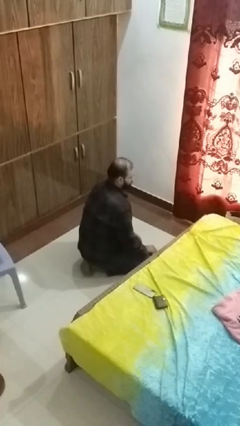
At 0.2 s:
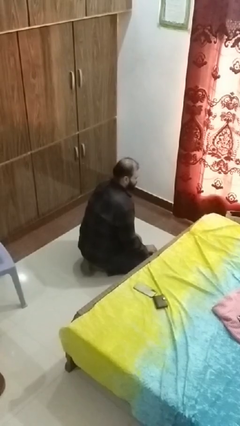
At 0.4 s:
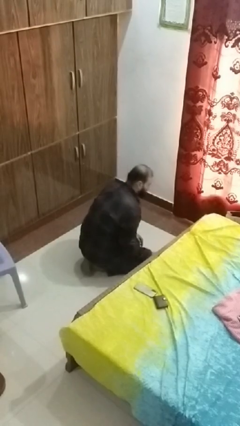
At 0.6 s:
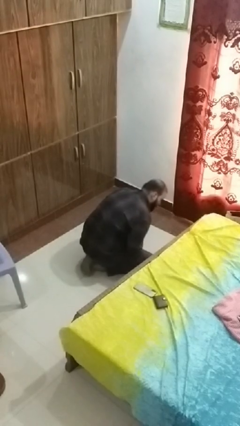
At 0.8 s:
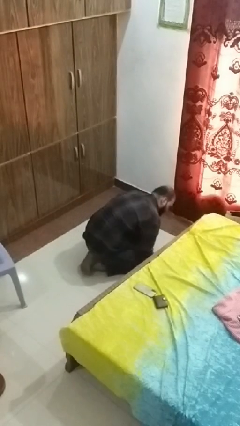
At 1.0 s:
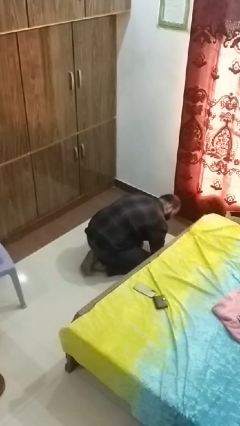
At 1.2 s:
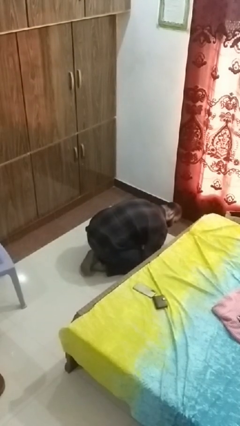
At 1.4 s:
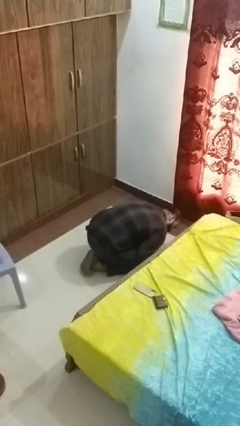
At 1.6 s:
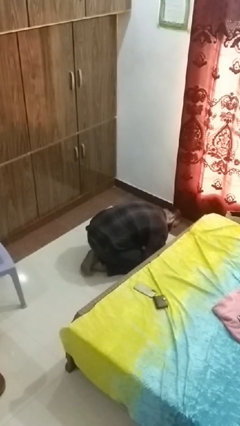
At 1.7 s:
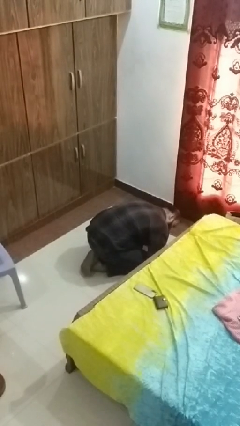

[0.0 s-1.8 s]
person searches under bed

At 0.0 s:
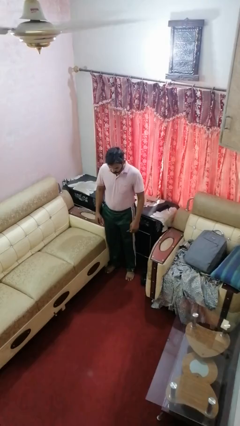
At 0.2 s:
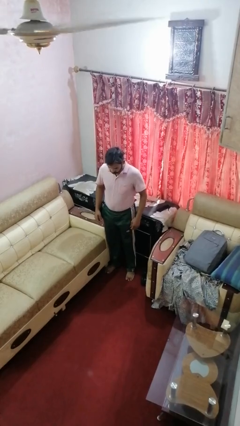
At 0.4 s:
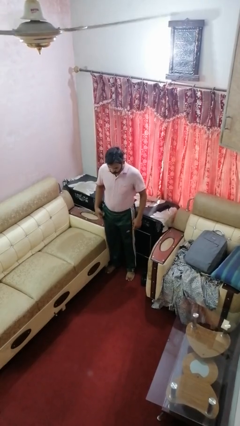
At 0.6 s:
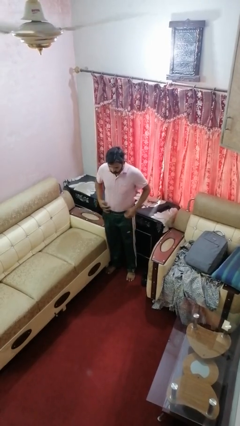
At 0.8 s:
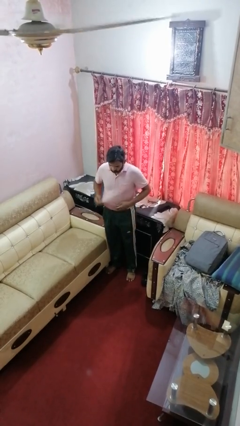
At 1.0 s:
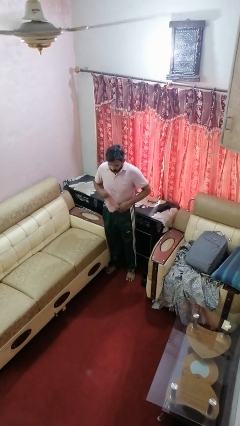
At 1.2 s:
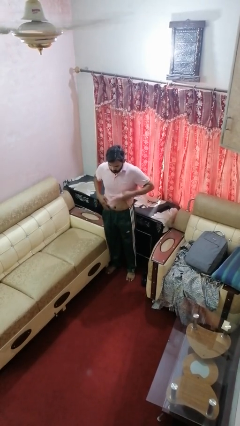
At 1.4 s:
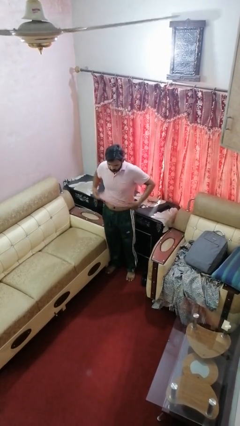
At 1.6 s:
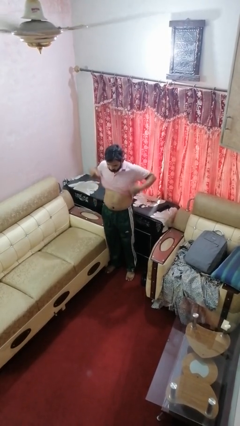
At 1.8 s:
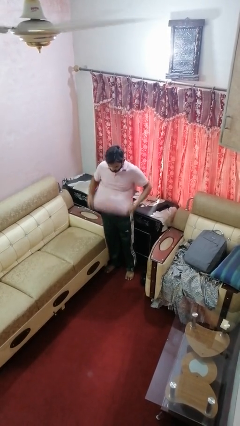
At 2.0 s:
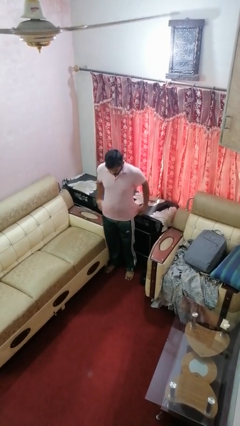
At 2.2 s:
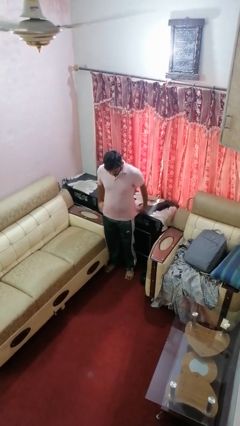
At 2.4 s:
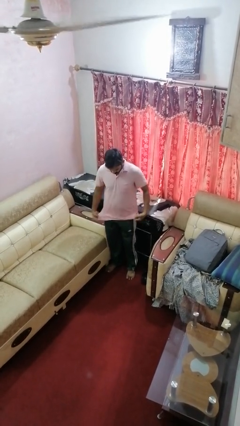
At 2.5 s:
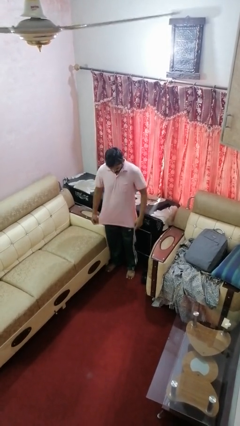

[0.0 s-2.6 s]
person untucks shirt

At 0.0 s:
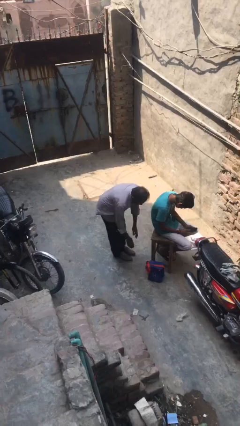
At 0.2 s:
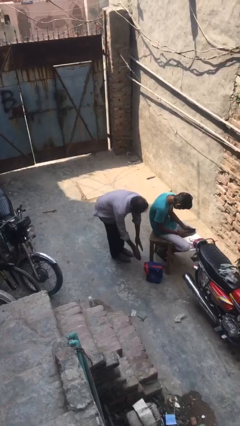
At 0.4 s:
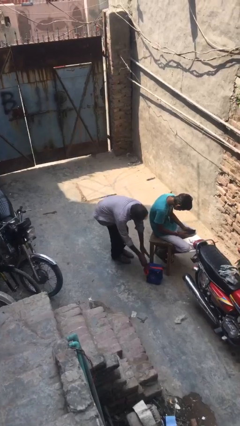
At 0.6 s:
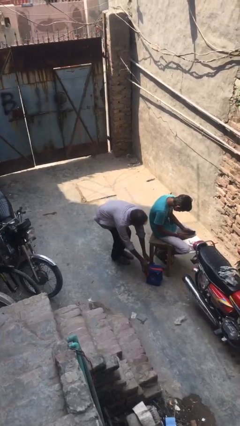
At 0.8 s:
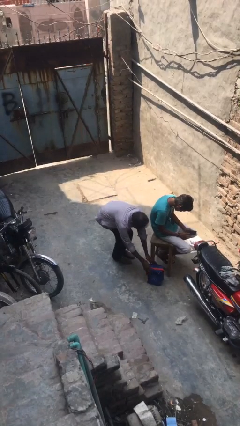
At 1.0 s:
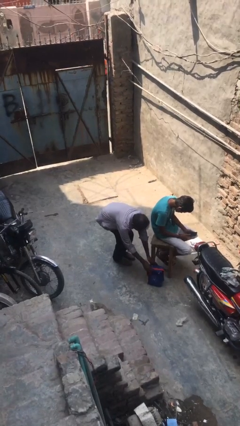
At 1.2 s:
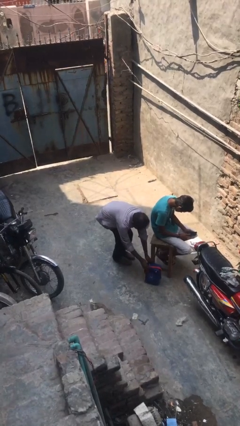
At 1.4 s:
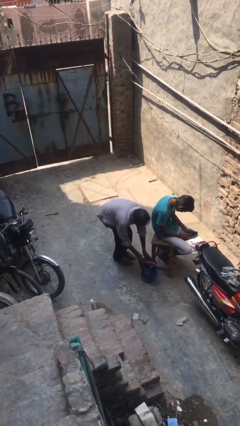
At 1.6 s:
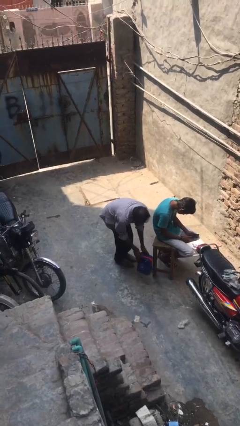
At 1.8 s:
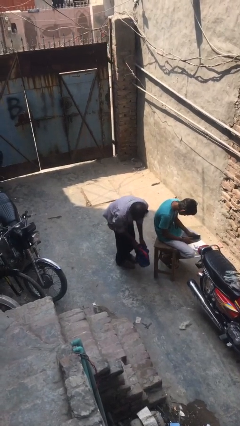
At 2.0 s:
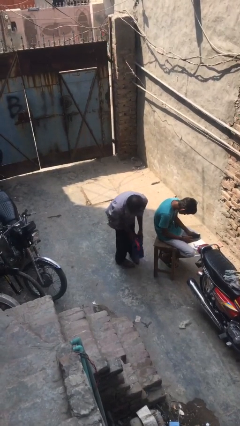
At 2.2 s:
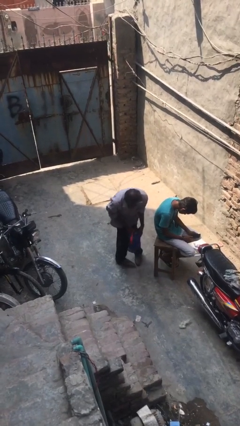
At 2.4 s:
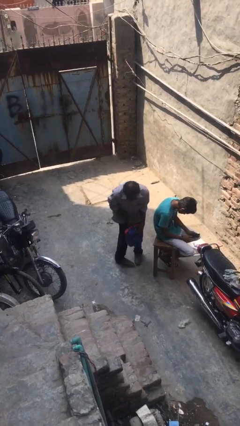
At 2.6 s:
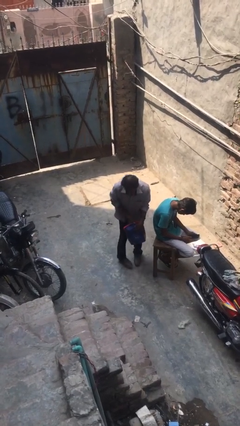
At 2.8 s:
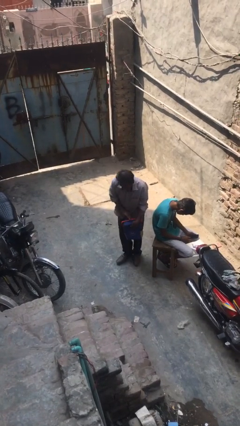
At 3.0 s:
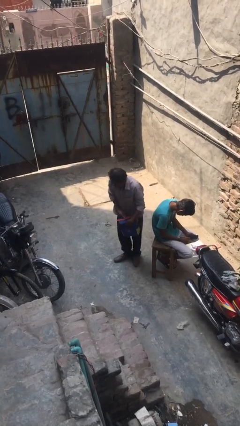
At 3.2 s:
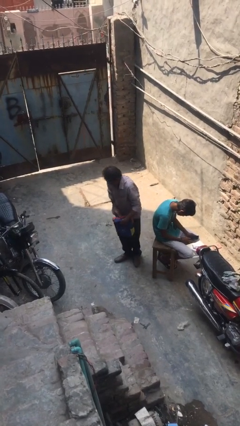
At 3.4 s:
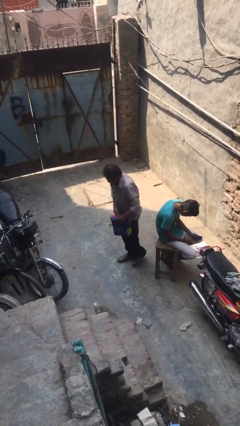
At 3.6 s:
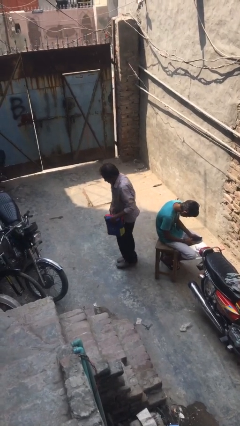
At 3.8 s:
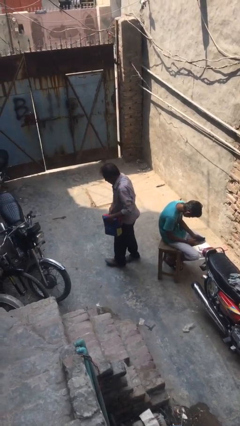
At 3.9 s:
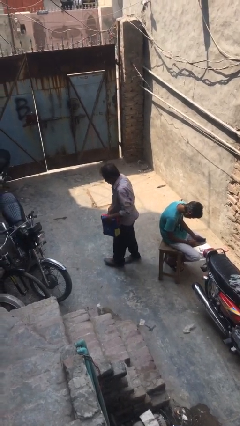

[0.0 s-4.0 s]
person steals object from person

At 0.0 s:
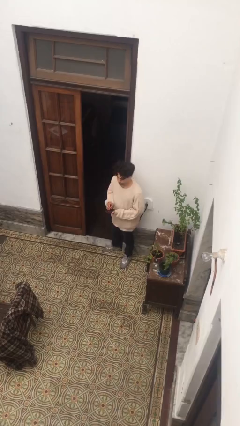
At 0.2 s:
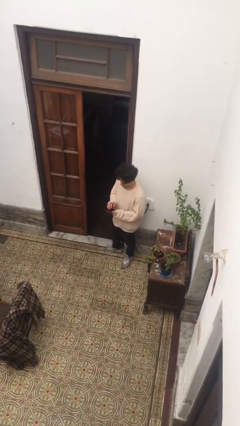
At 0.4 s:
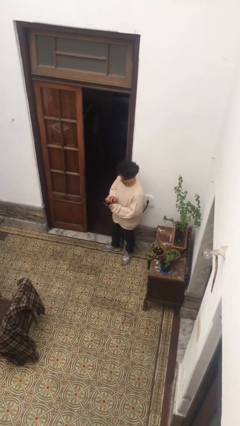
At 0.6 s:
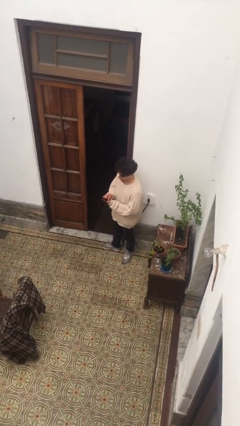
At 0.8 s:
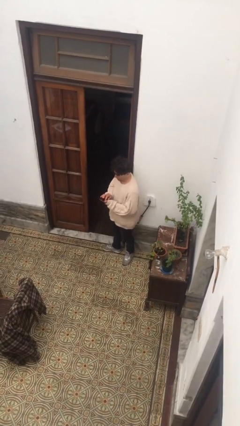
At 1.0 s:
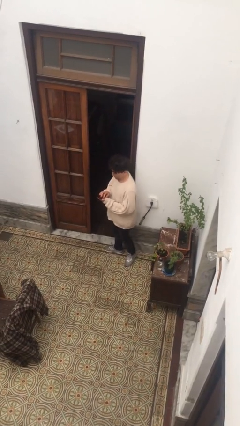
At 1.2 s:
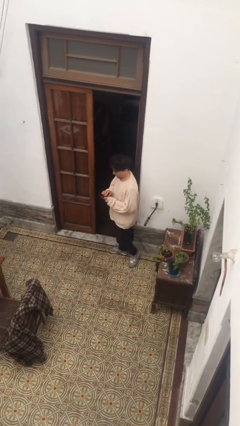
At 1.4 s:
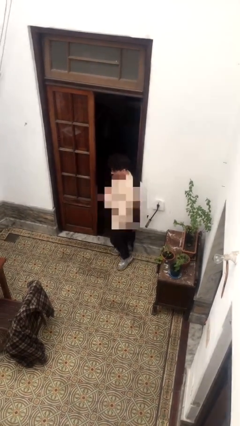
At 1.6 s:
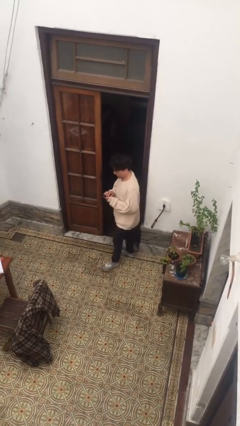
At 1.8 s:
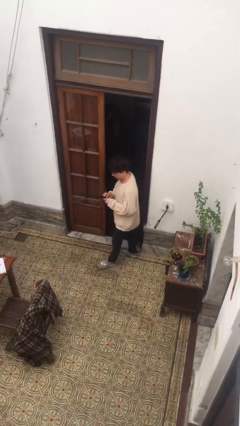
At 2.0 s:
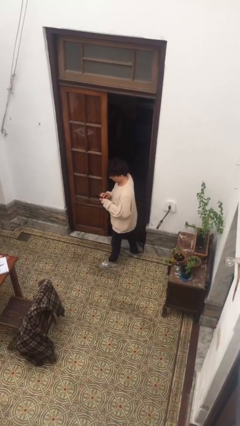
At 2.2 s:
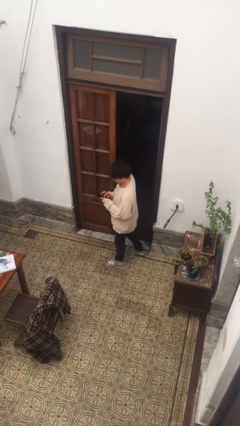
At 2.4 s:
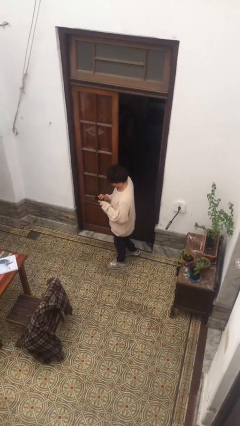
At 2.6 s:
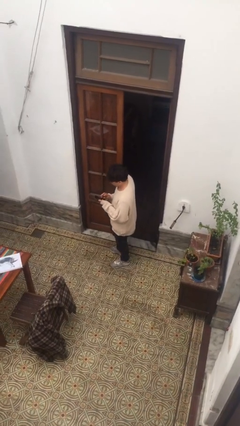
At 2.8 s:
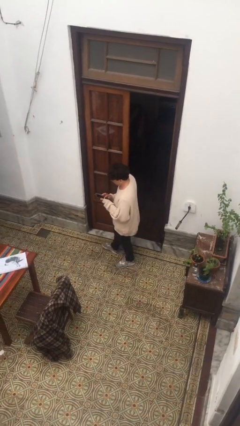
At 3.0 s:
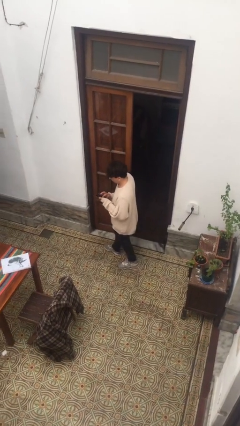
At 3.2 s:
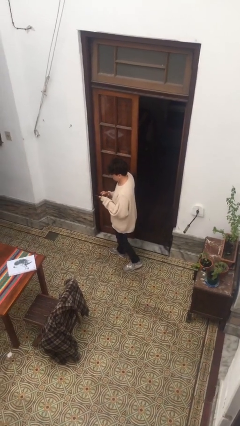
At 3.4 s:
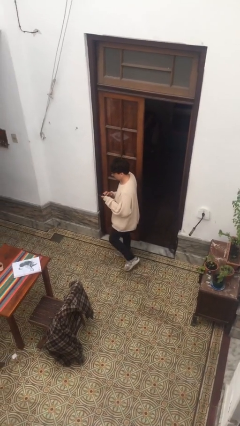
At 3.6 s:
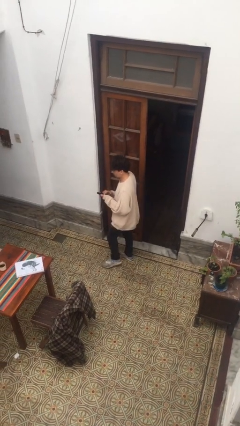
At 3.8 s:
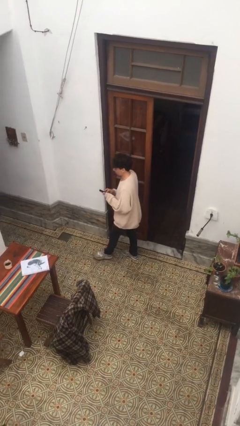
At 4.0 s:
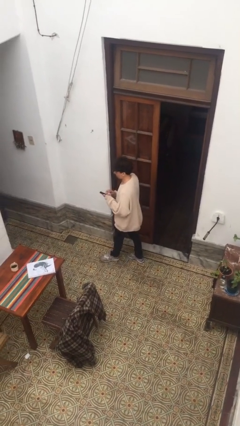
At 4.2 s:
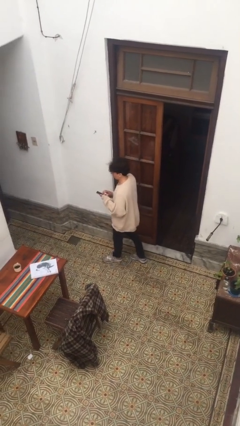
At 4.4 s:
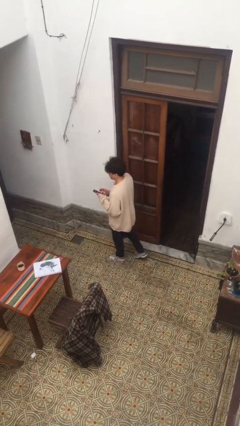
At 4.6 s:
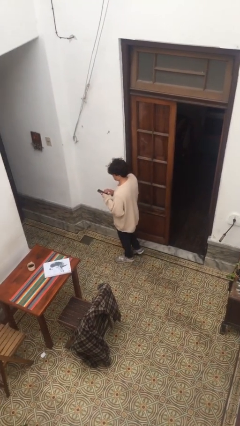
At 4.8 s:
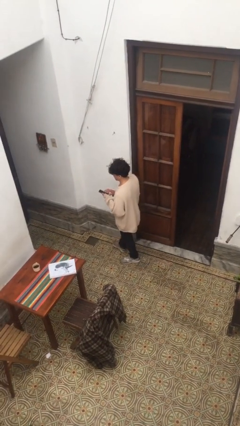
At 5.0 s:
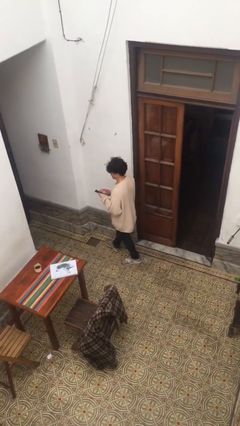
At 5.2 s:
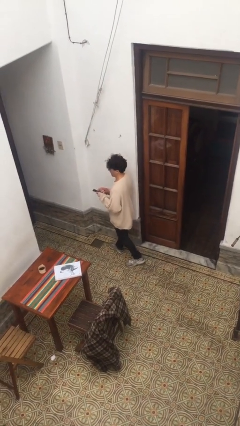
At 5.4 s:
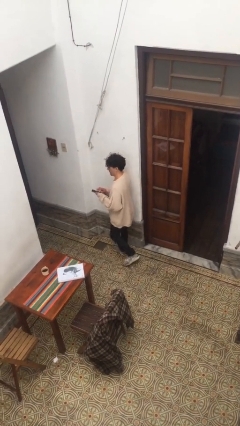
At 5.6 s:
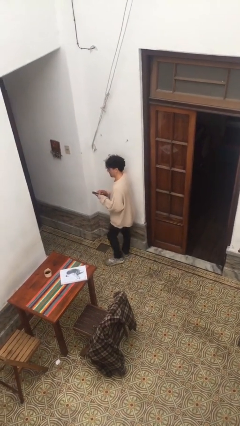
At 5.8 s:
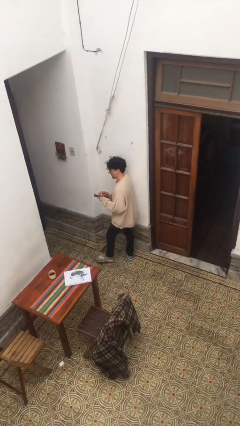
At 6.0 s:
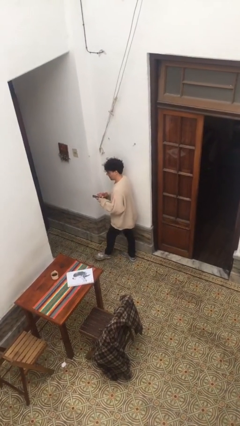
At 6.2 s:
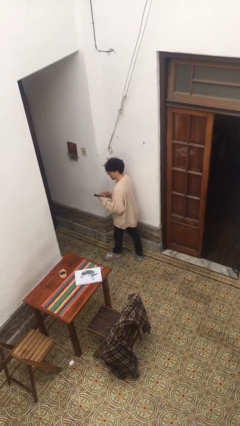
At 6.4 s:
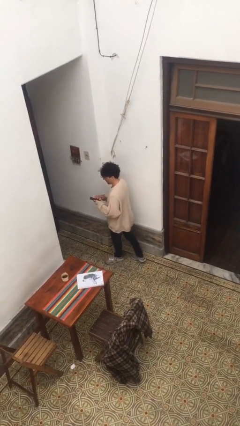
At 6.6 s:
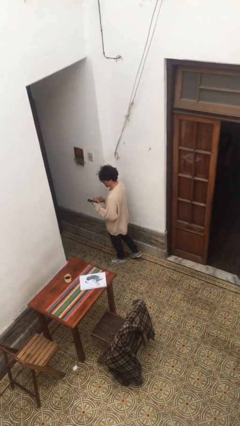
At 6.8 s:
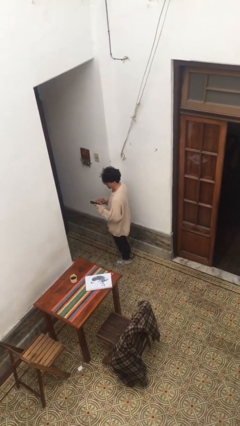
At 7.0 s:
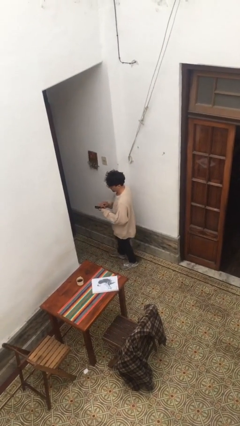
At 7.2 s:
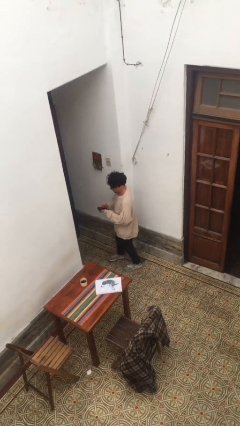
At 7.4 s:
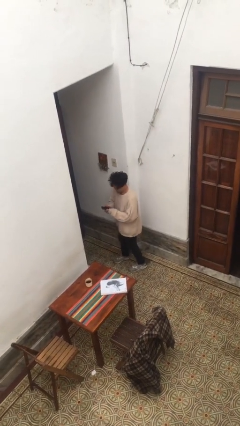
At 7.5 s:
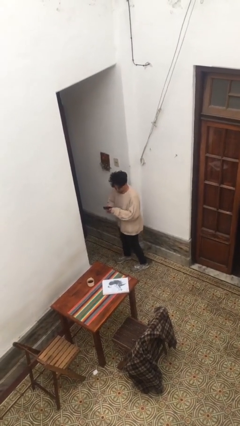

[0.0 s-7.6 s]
person texts on phone

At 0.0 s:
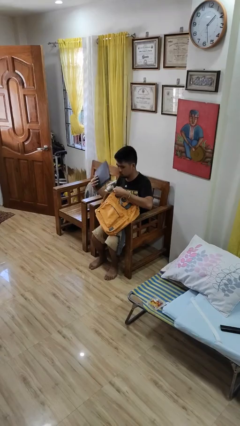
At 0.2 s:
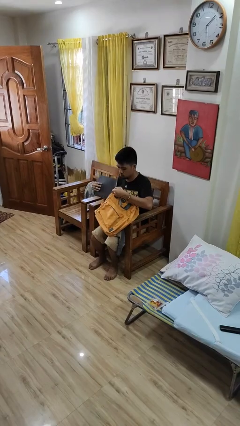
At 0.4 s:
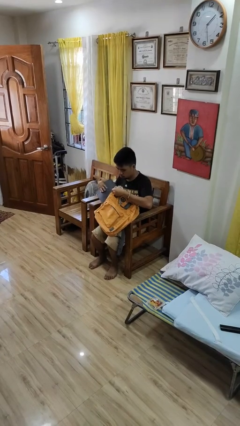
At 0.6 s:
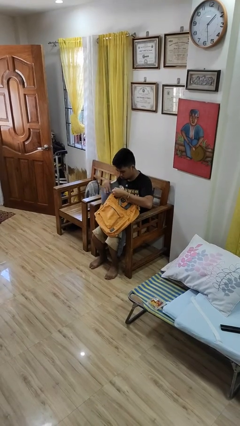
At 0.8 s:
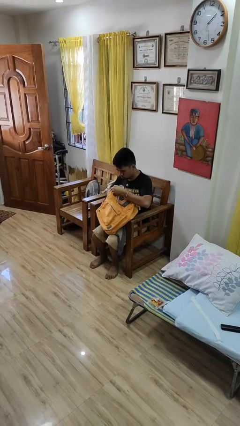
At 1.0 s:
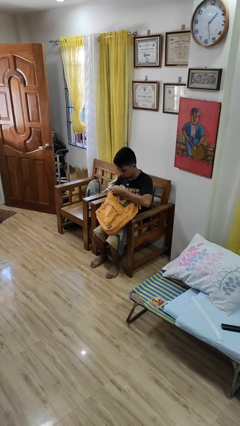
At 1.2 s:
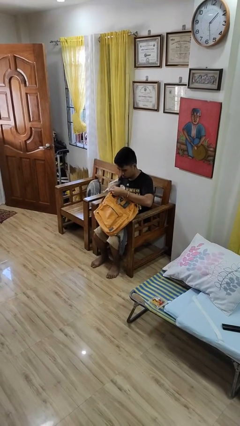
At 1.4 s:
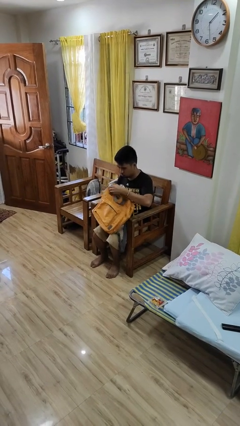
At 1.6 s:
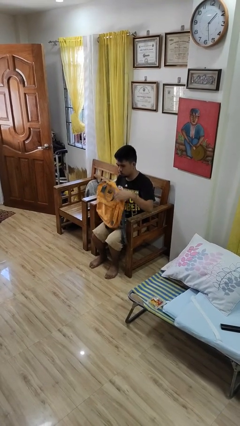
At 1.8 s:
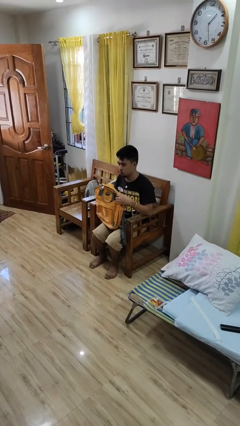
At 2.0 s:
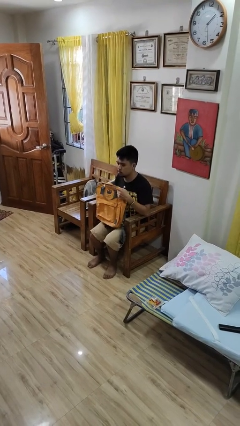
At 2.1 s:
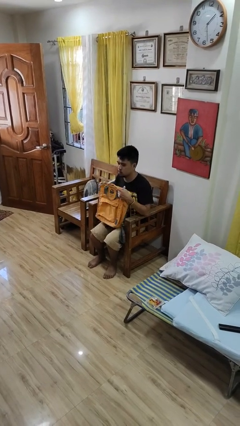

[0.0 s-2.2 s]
person puts object into backpack
